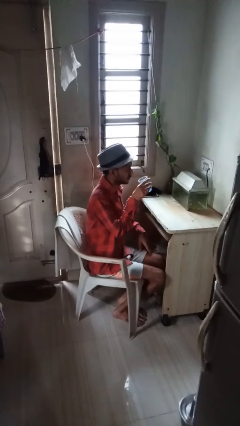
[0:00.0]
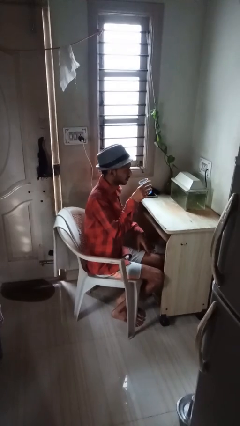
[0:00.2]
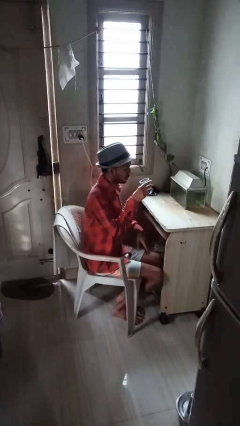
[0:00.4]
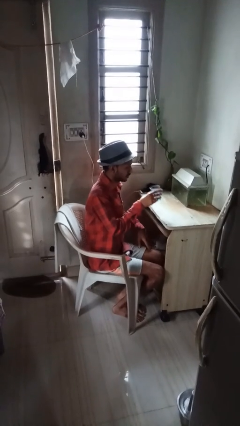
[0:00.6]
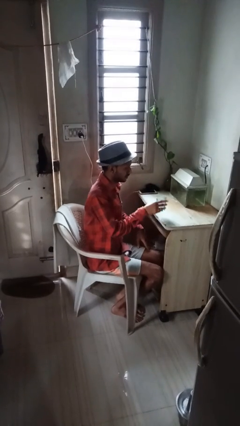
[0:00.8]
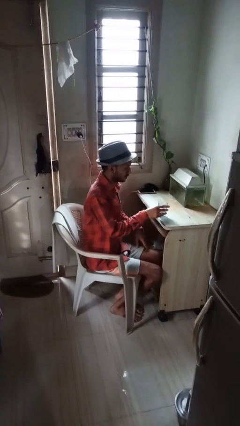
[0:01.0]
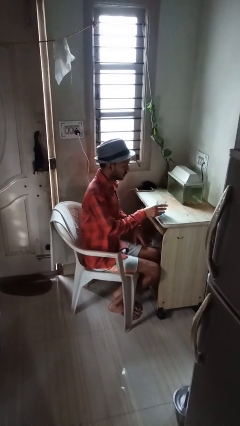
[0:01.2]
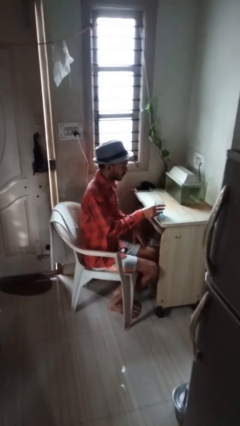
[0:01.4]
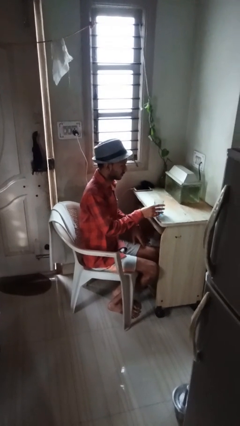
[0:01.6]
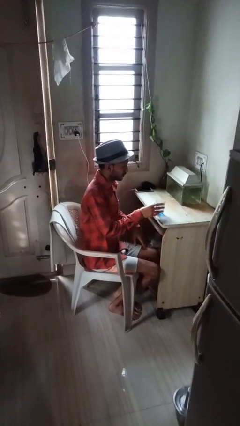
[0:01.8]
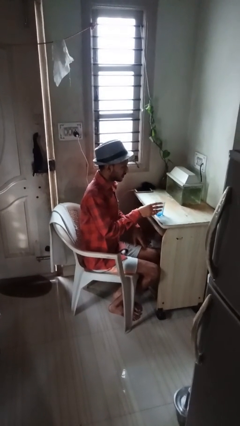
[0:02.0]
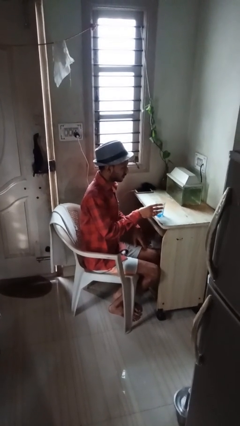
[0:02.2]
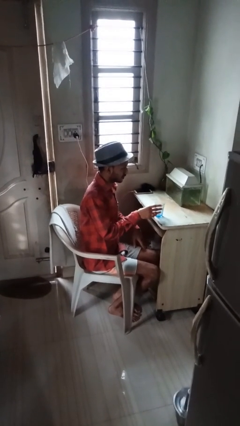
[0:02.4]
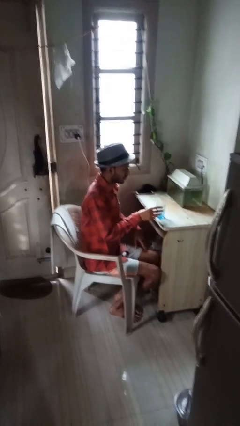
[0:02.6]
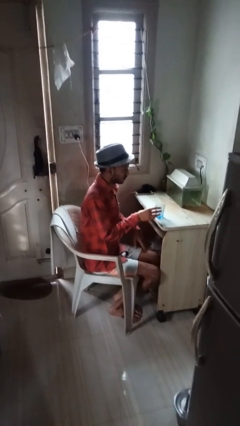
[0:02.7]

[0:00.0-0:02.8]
person puts down object on table

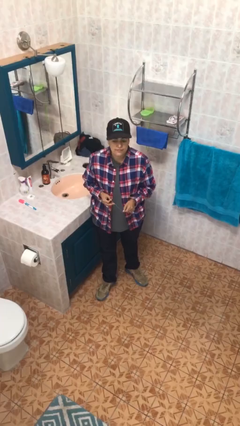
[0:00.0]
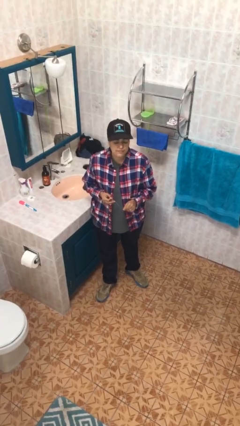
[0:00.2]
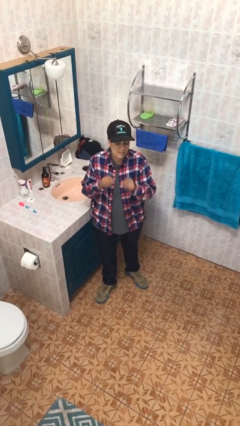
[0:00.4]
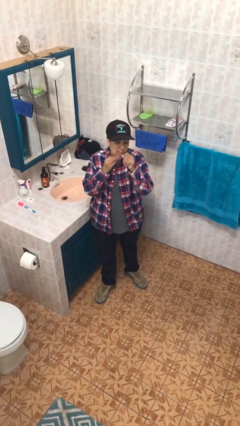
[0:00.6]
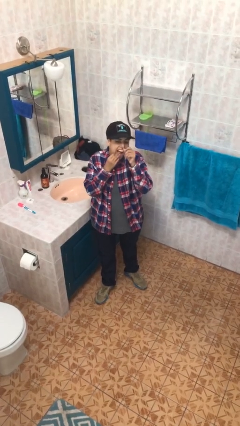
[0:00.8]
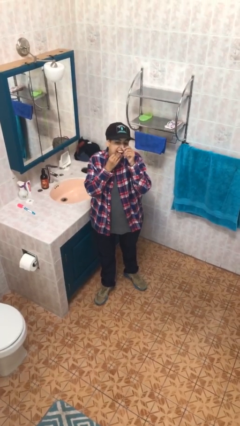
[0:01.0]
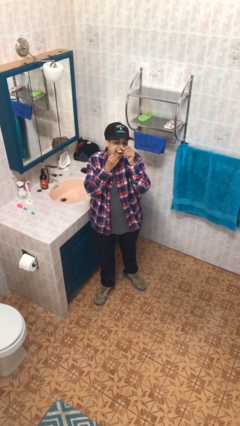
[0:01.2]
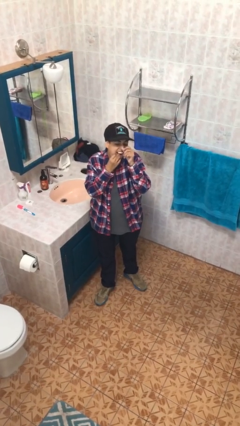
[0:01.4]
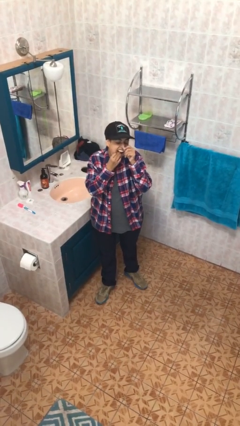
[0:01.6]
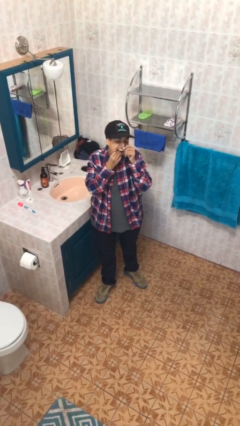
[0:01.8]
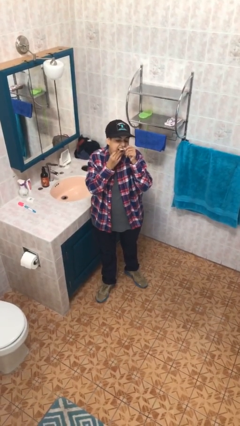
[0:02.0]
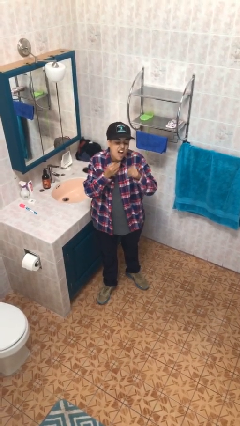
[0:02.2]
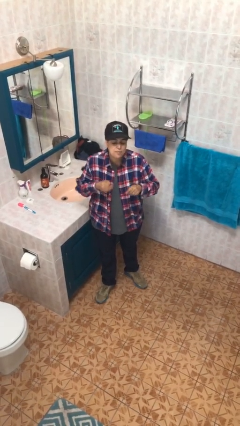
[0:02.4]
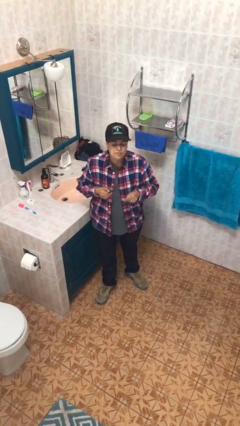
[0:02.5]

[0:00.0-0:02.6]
person flosses

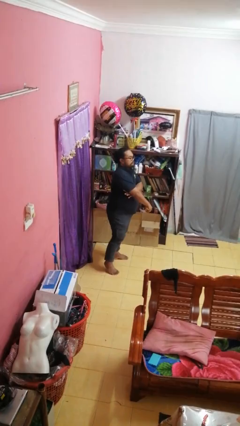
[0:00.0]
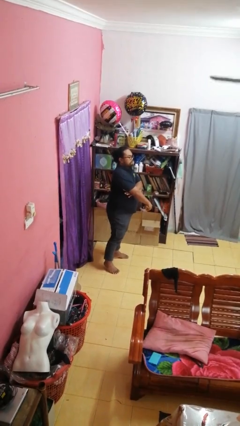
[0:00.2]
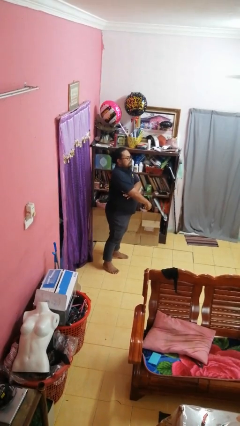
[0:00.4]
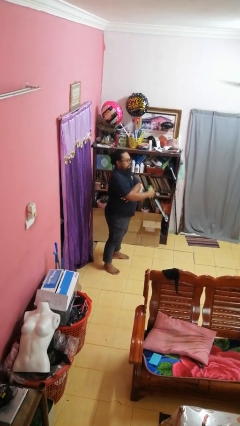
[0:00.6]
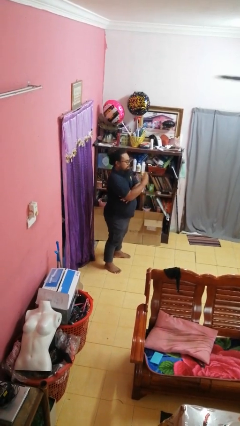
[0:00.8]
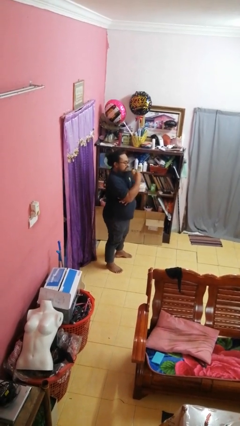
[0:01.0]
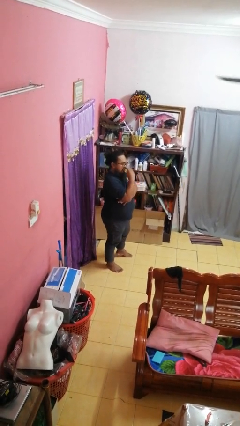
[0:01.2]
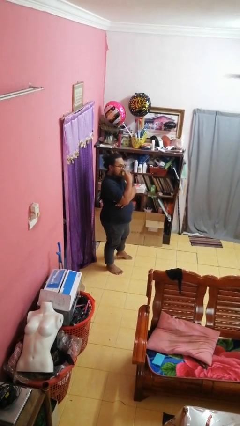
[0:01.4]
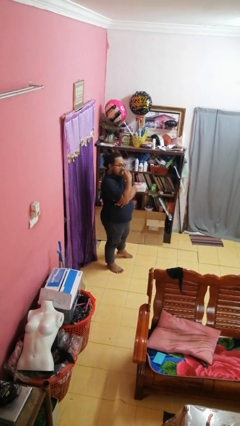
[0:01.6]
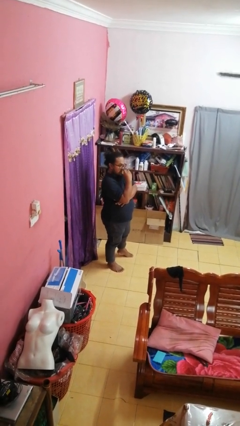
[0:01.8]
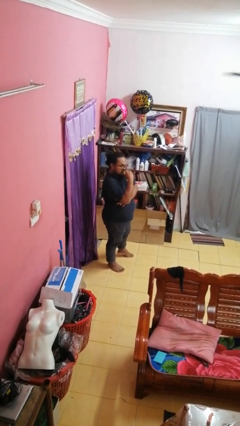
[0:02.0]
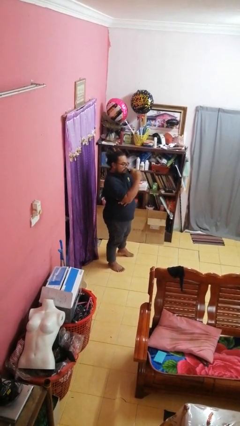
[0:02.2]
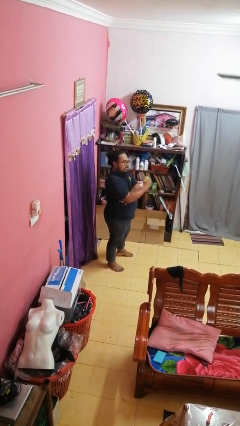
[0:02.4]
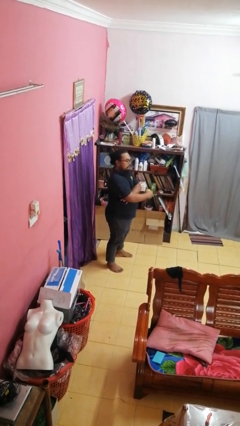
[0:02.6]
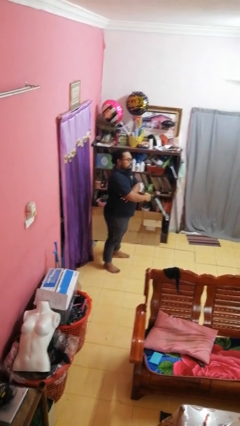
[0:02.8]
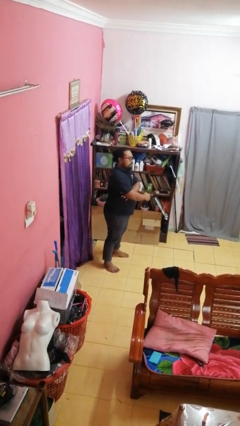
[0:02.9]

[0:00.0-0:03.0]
person eats apple

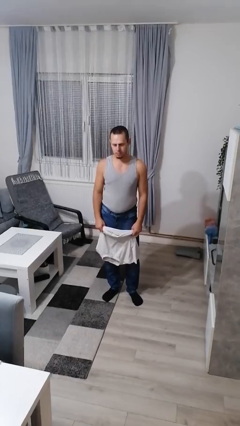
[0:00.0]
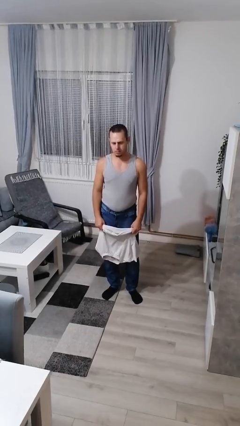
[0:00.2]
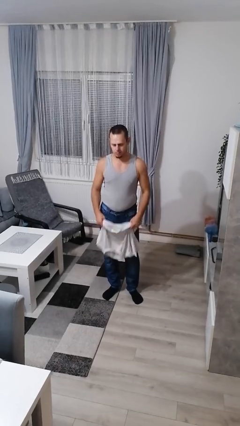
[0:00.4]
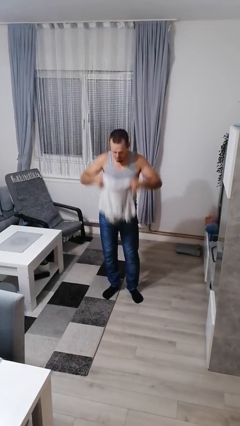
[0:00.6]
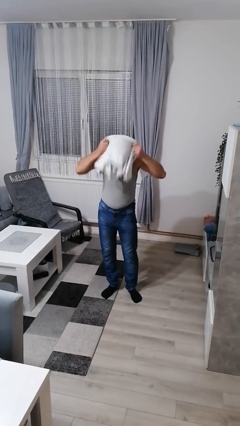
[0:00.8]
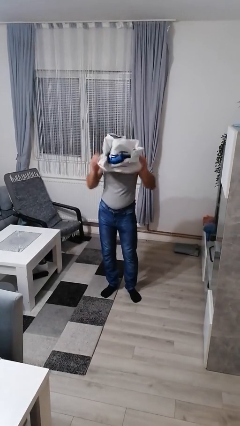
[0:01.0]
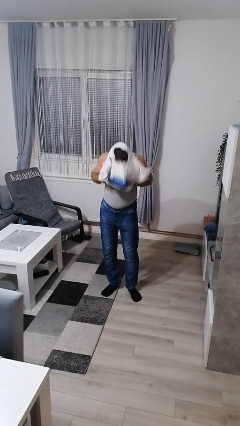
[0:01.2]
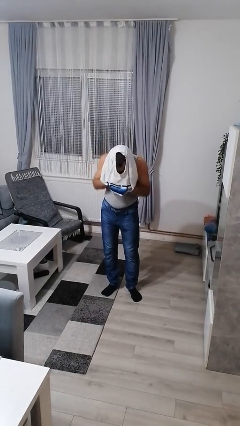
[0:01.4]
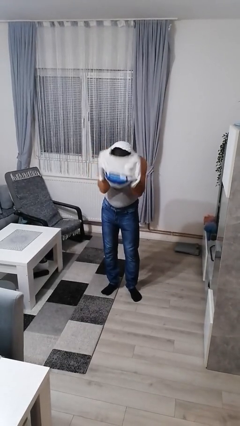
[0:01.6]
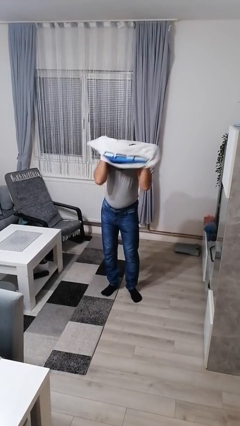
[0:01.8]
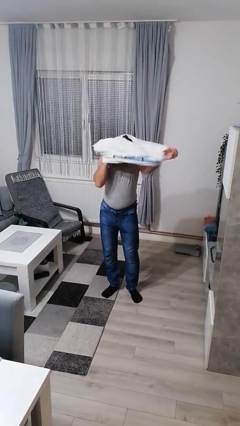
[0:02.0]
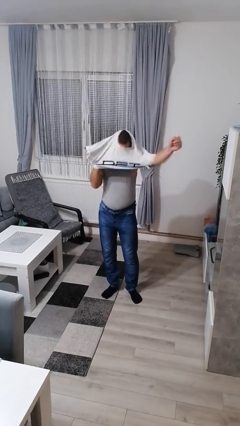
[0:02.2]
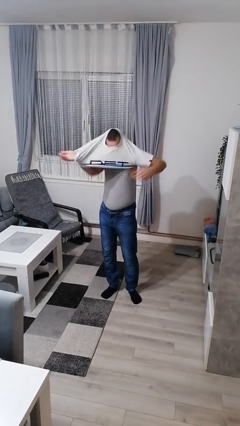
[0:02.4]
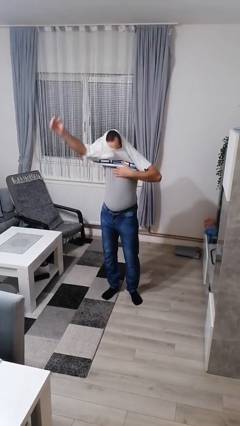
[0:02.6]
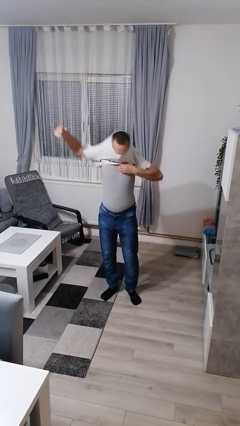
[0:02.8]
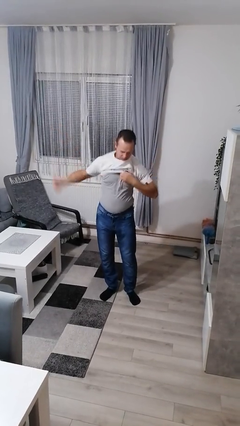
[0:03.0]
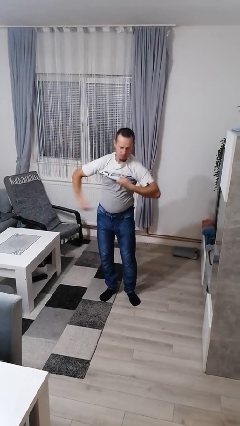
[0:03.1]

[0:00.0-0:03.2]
person puts on shirt

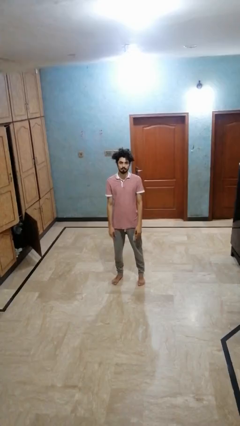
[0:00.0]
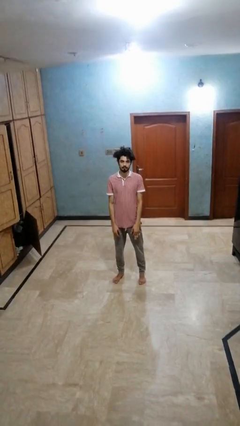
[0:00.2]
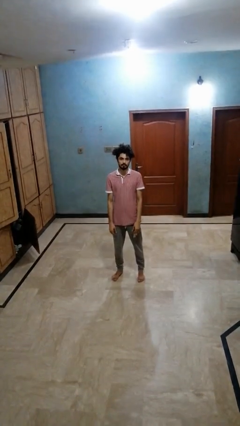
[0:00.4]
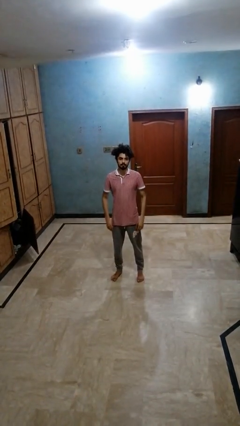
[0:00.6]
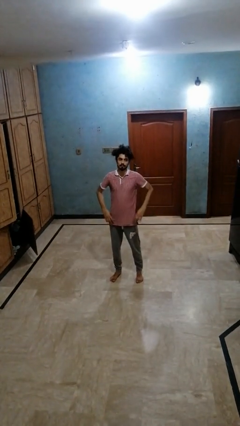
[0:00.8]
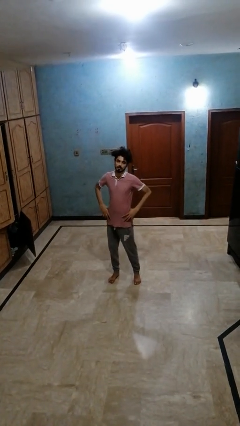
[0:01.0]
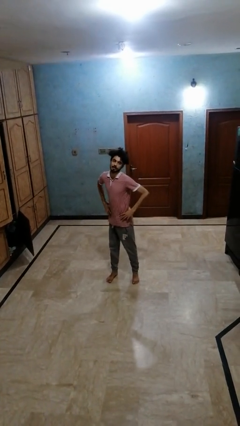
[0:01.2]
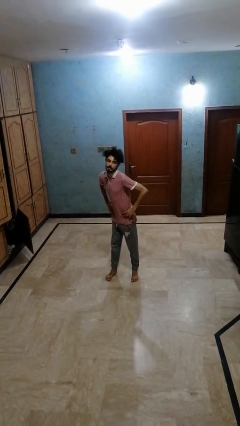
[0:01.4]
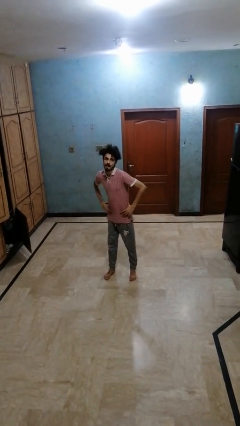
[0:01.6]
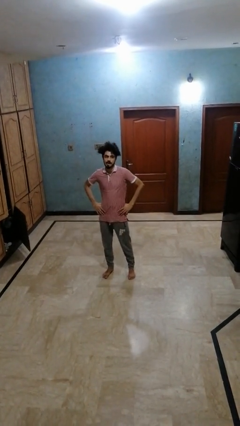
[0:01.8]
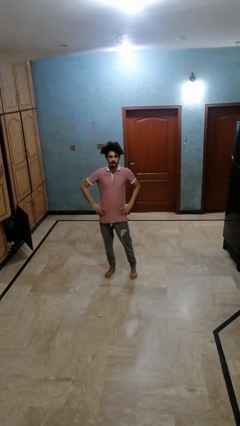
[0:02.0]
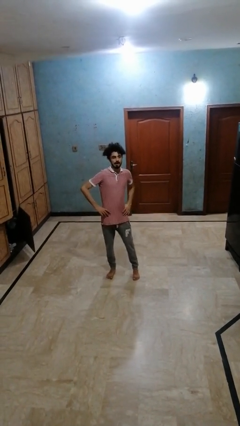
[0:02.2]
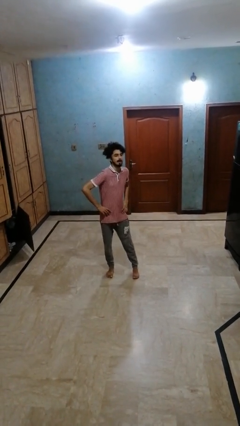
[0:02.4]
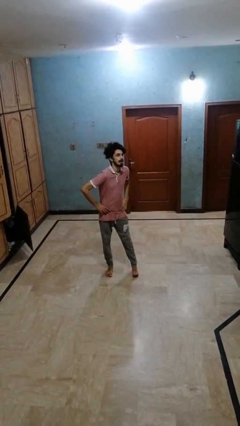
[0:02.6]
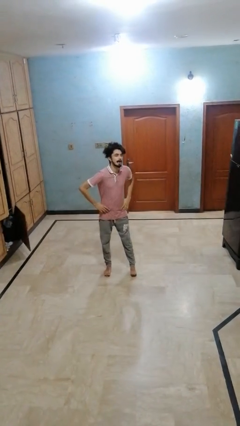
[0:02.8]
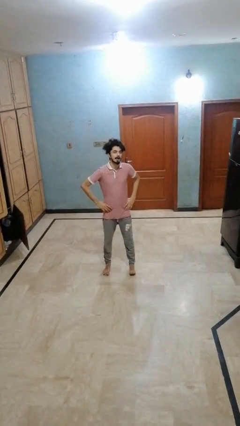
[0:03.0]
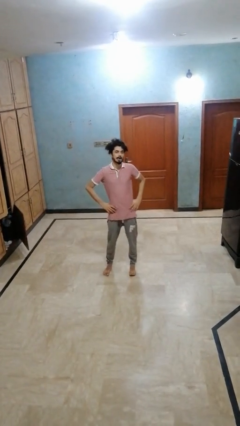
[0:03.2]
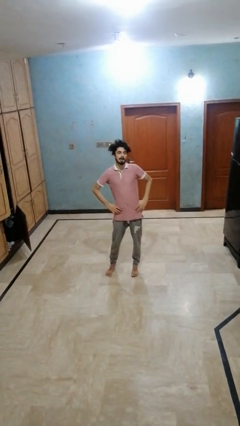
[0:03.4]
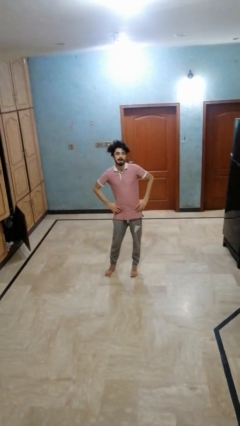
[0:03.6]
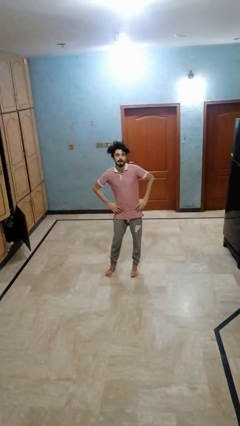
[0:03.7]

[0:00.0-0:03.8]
person wiggles hips

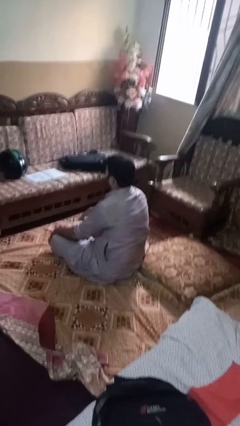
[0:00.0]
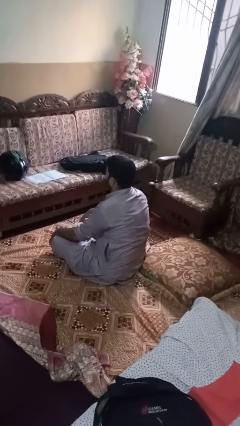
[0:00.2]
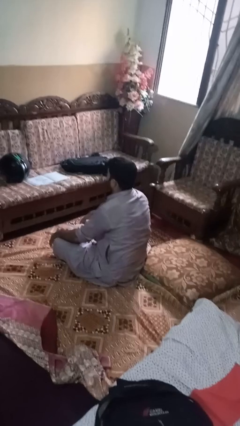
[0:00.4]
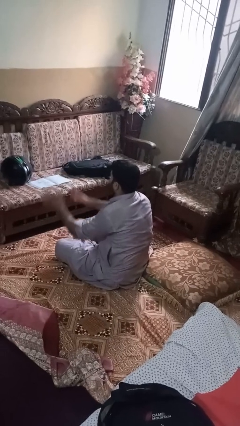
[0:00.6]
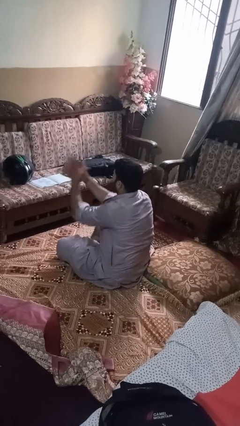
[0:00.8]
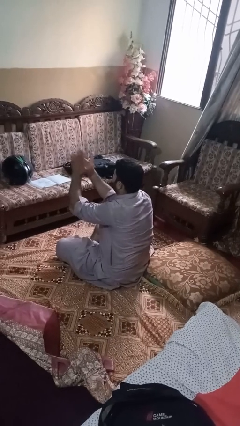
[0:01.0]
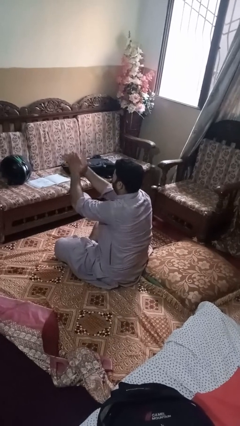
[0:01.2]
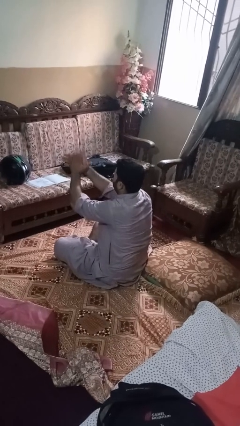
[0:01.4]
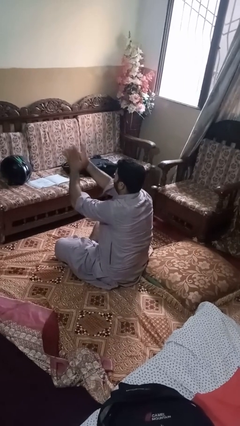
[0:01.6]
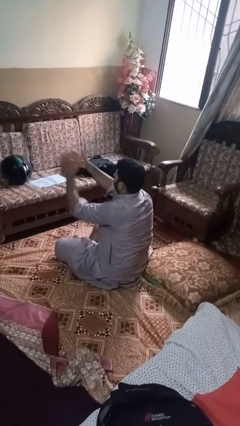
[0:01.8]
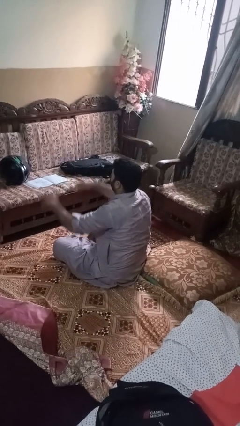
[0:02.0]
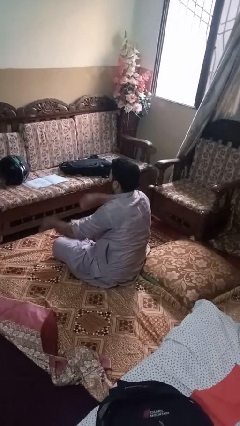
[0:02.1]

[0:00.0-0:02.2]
person claps hands
